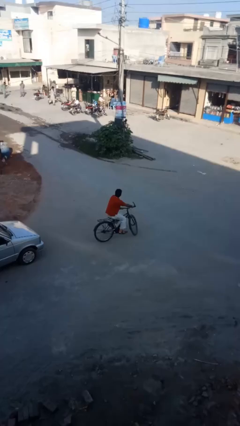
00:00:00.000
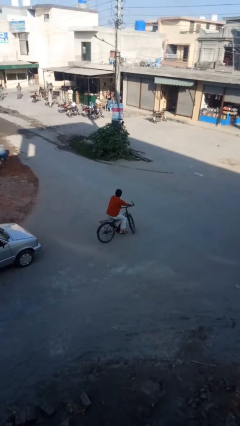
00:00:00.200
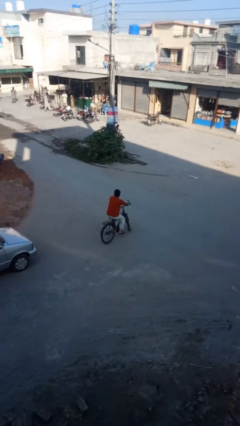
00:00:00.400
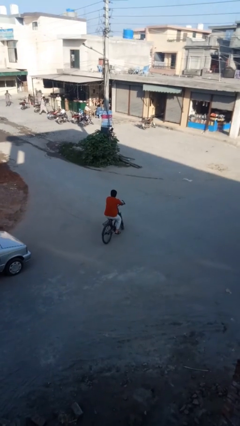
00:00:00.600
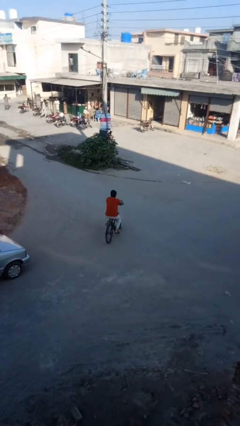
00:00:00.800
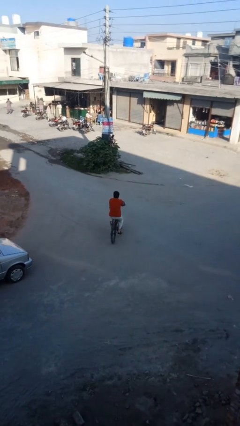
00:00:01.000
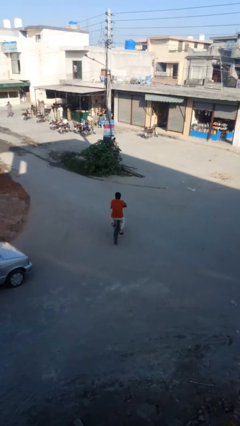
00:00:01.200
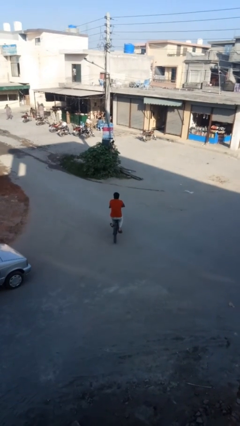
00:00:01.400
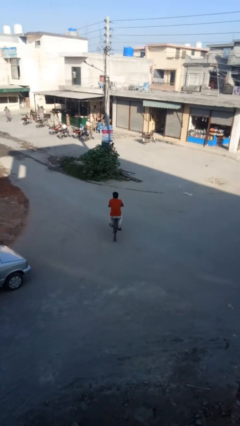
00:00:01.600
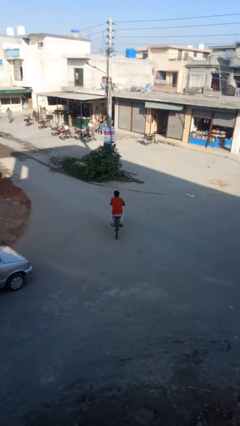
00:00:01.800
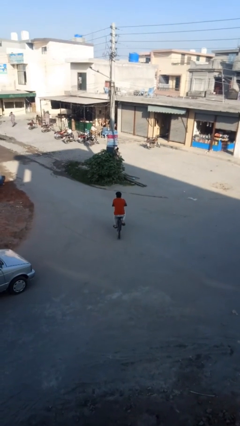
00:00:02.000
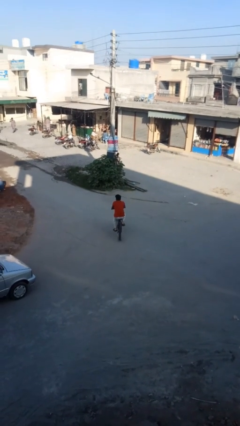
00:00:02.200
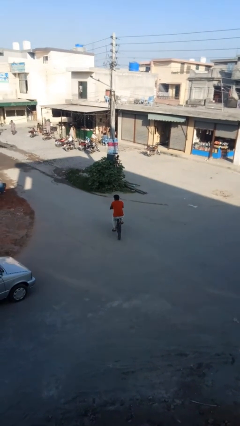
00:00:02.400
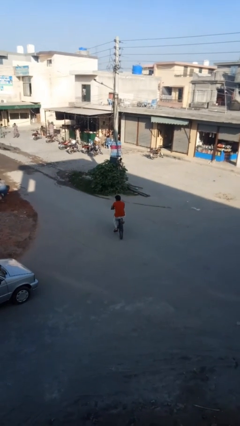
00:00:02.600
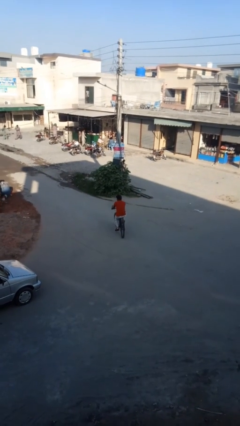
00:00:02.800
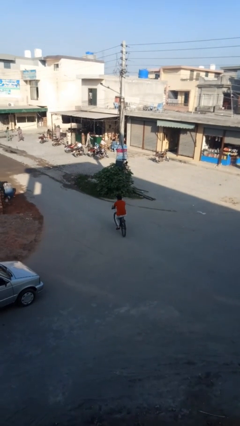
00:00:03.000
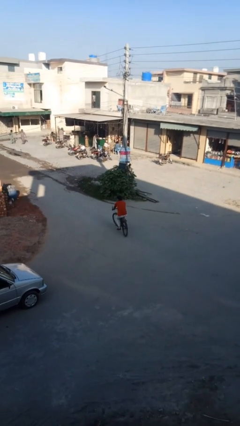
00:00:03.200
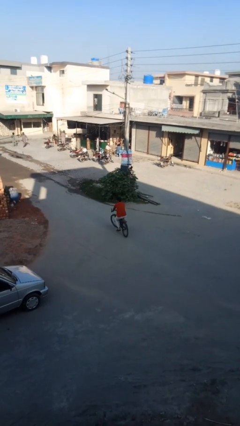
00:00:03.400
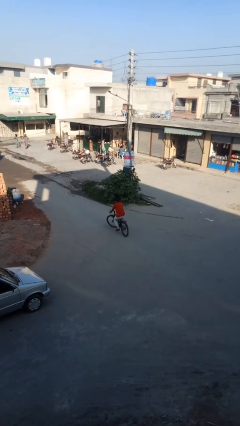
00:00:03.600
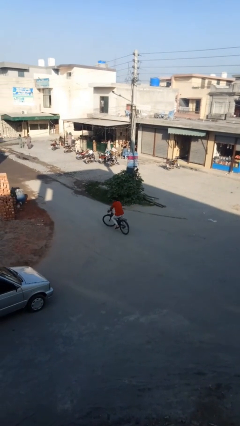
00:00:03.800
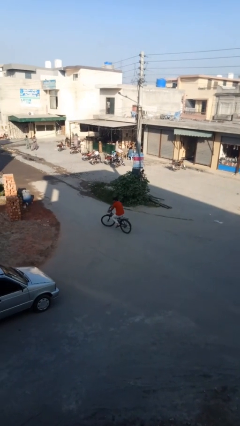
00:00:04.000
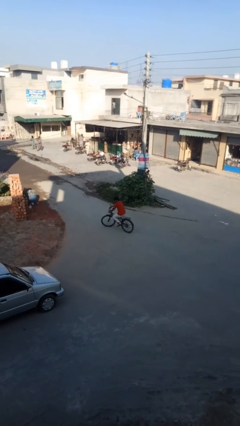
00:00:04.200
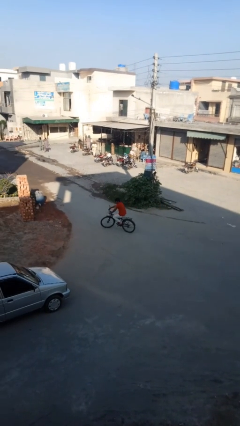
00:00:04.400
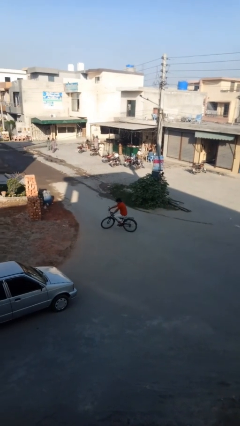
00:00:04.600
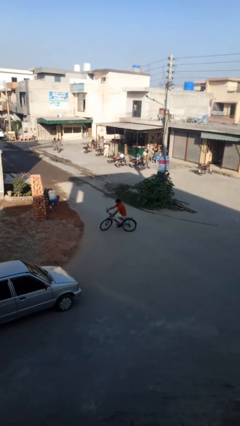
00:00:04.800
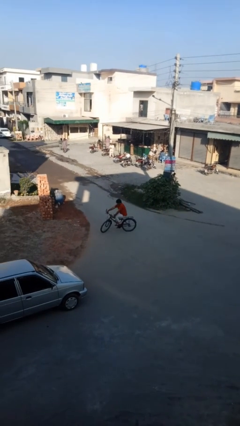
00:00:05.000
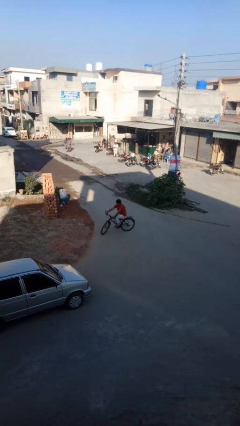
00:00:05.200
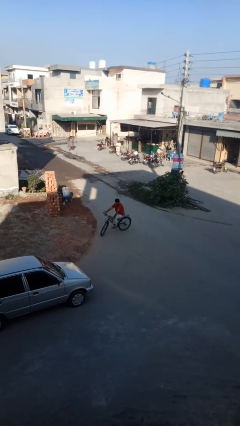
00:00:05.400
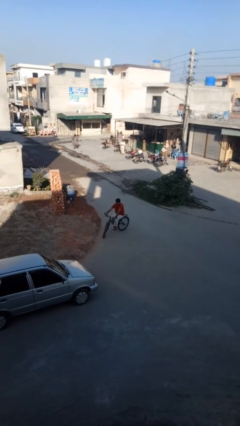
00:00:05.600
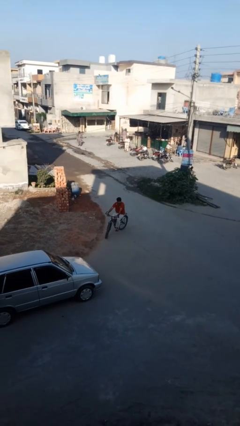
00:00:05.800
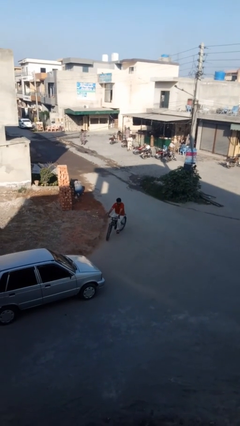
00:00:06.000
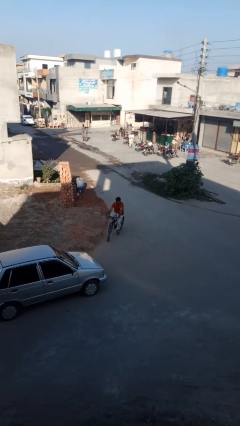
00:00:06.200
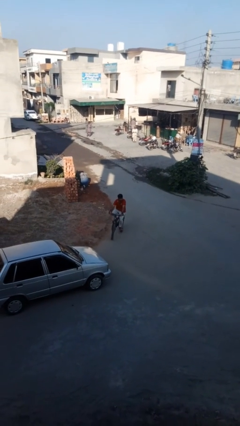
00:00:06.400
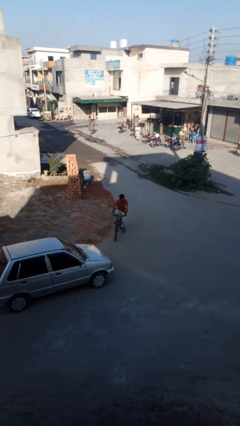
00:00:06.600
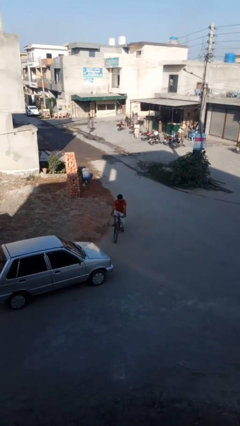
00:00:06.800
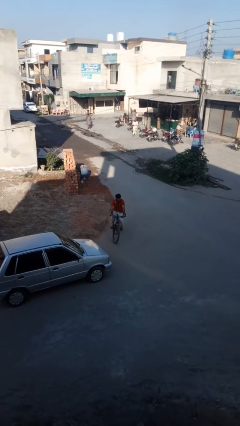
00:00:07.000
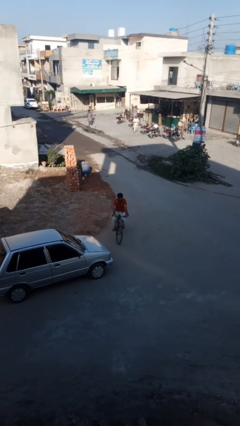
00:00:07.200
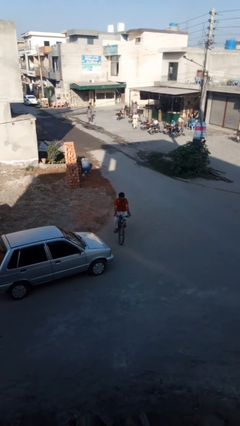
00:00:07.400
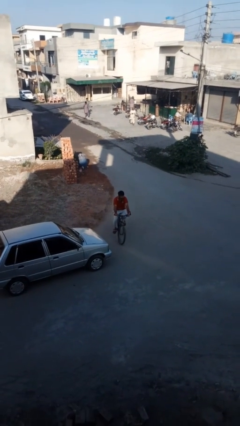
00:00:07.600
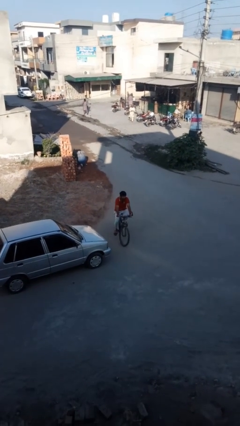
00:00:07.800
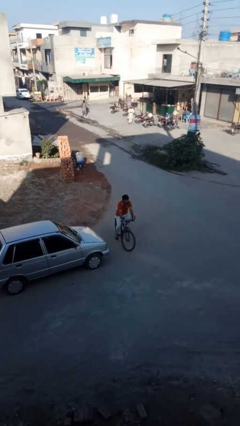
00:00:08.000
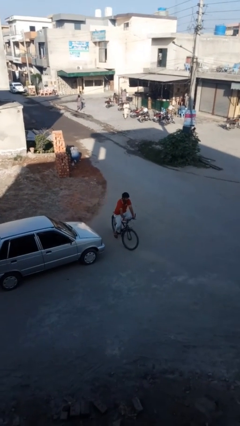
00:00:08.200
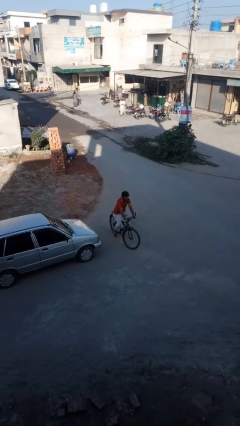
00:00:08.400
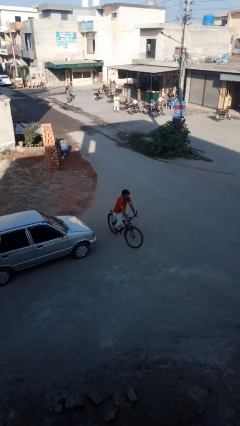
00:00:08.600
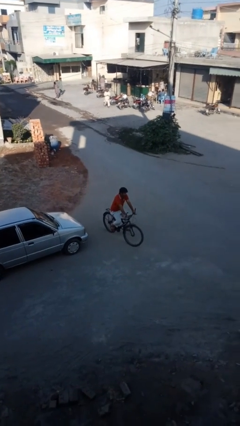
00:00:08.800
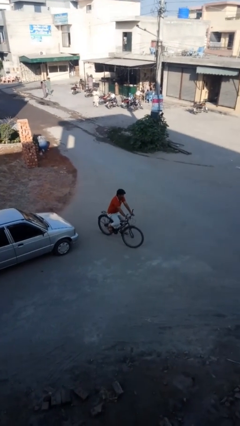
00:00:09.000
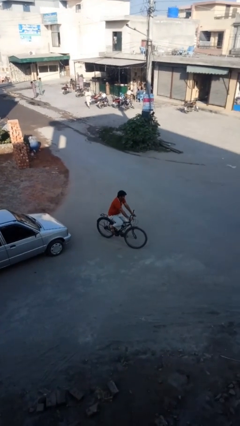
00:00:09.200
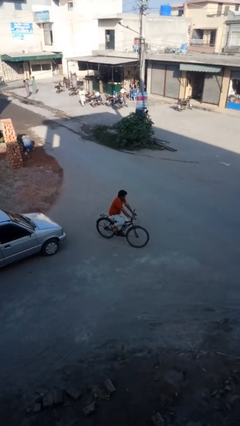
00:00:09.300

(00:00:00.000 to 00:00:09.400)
person rides bicycle

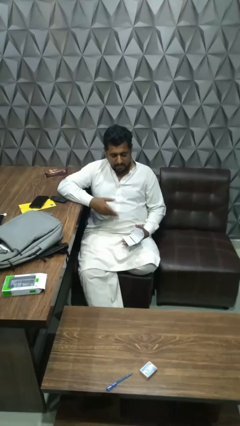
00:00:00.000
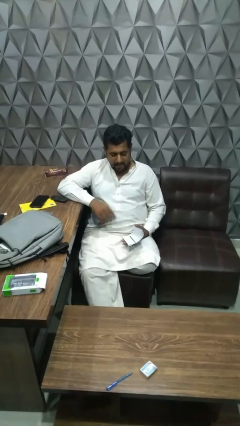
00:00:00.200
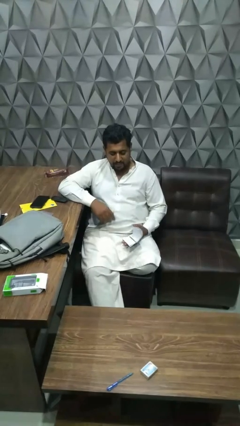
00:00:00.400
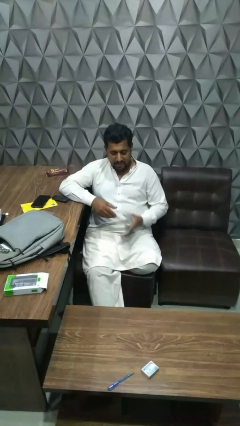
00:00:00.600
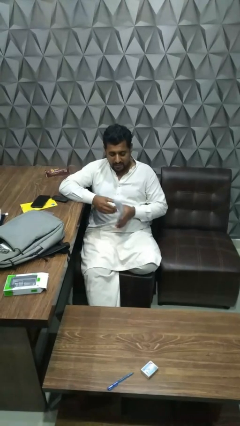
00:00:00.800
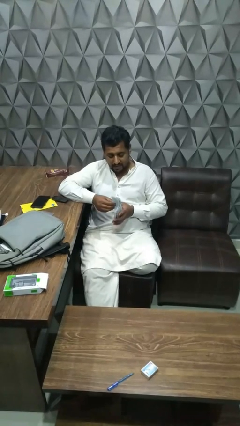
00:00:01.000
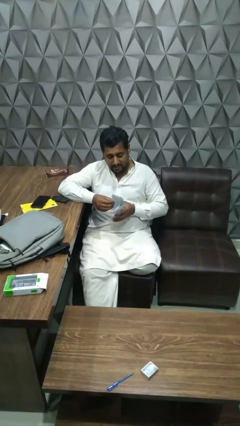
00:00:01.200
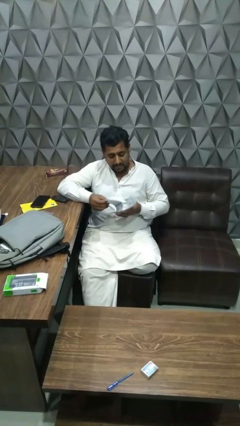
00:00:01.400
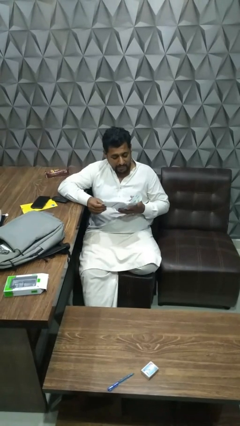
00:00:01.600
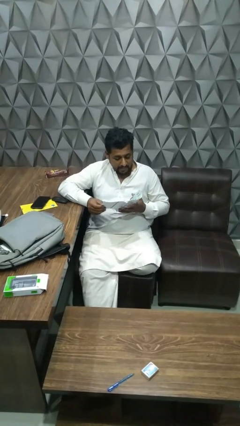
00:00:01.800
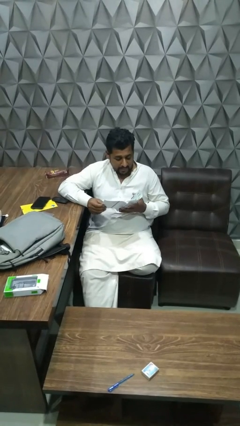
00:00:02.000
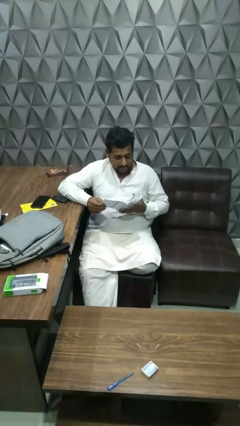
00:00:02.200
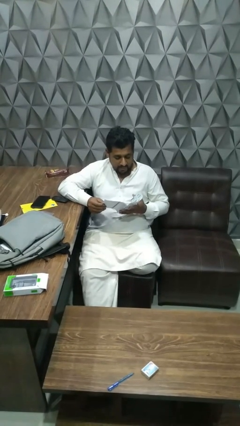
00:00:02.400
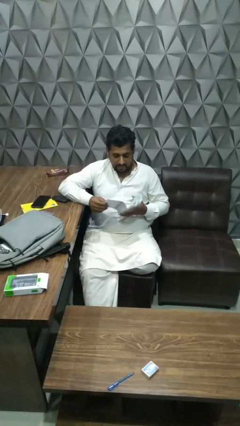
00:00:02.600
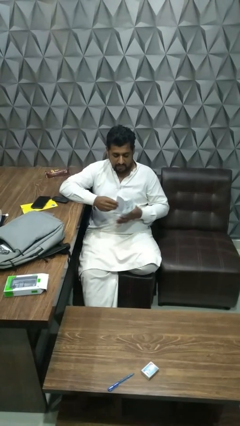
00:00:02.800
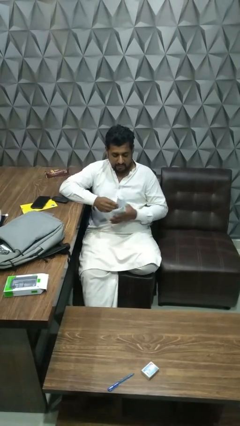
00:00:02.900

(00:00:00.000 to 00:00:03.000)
person reads magazine

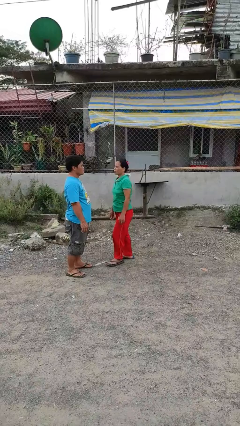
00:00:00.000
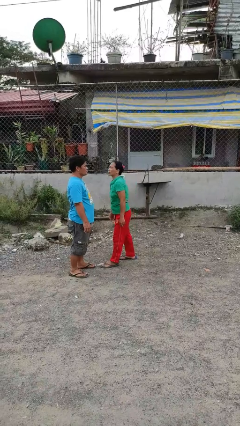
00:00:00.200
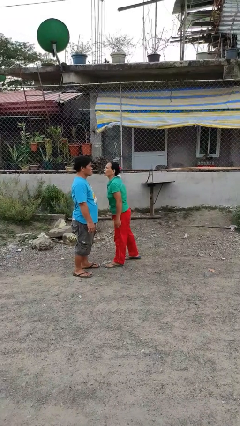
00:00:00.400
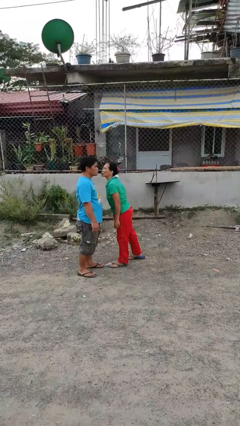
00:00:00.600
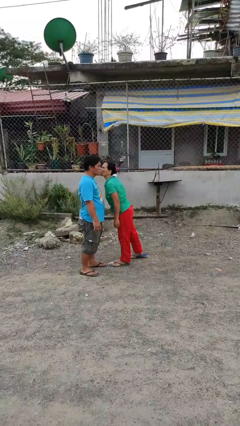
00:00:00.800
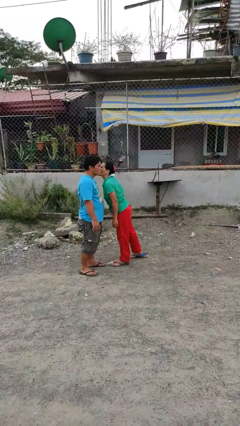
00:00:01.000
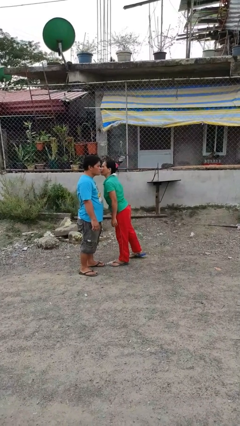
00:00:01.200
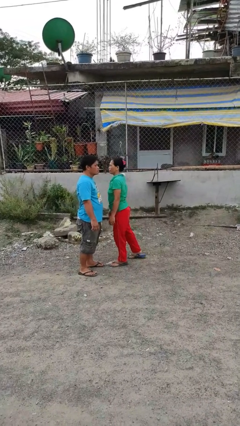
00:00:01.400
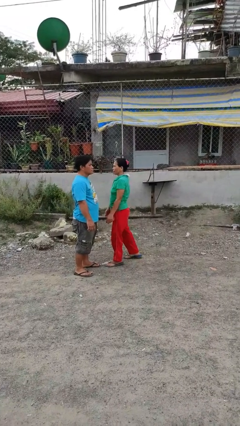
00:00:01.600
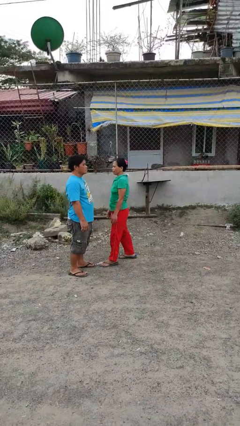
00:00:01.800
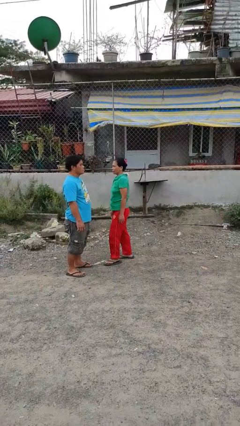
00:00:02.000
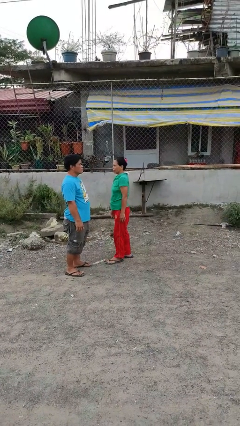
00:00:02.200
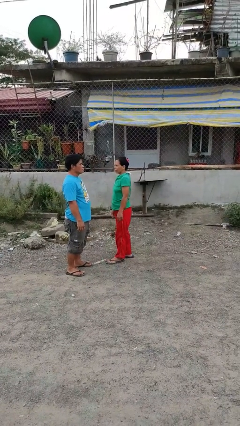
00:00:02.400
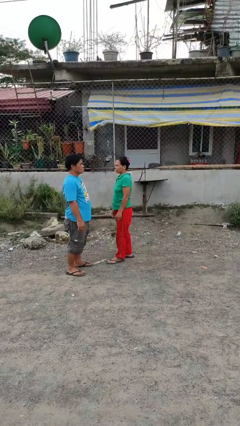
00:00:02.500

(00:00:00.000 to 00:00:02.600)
person kisses cheek of person

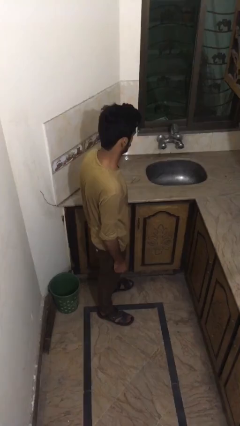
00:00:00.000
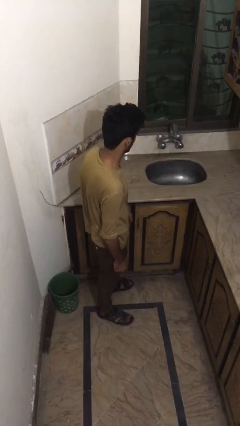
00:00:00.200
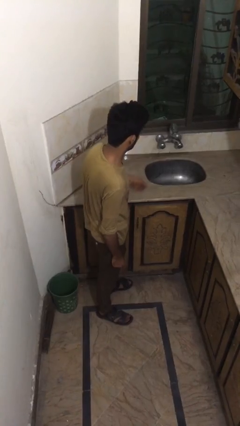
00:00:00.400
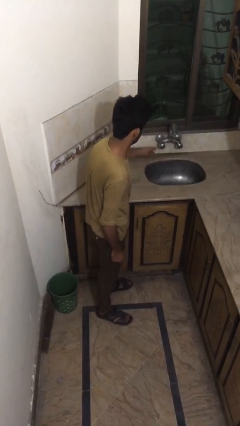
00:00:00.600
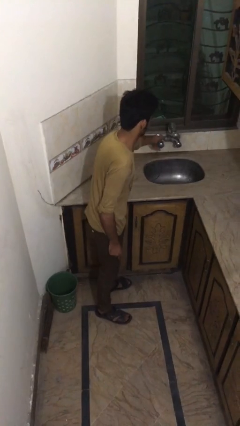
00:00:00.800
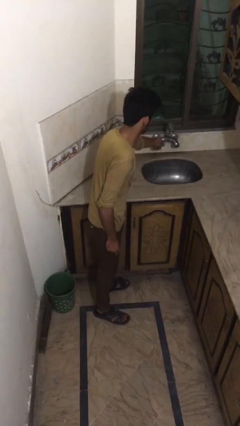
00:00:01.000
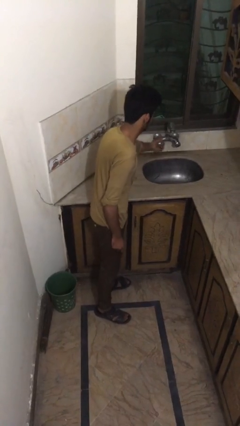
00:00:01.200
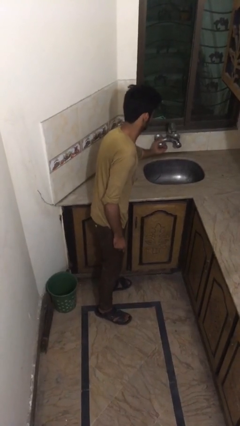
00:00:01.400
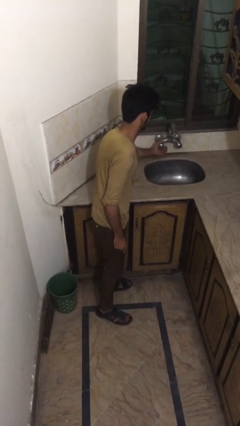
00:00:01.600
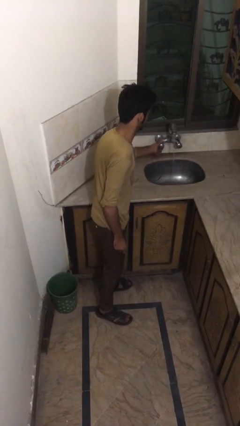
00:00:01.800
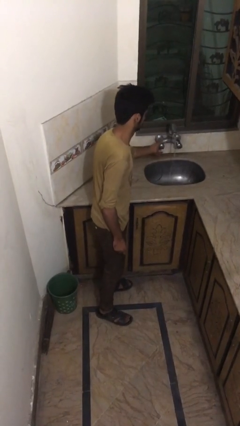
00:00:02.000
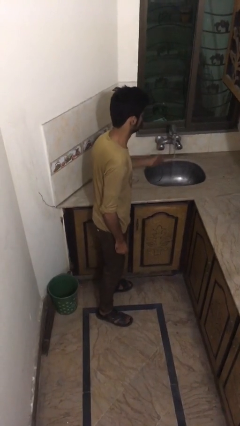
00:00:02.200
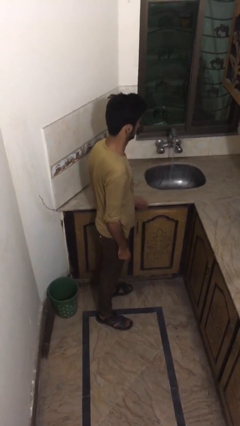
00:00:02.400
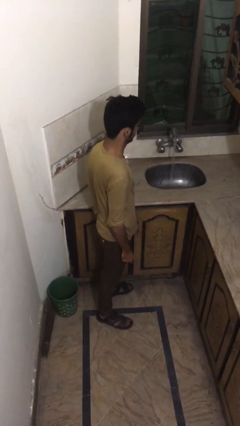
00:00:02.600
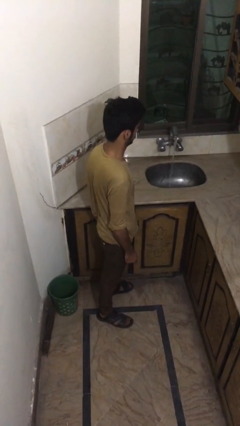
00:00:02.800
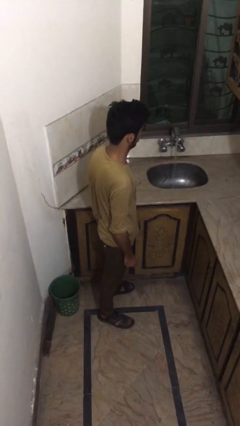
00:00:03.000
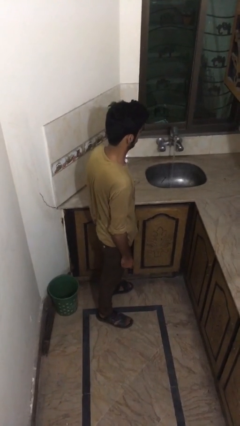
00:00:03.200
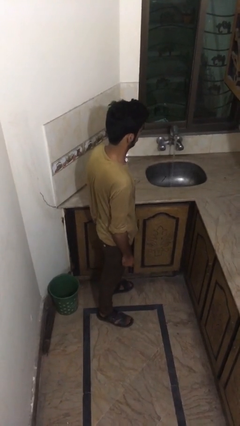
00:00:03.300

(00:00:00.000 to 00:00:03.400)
person turns on faucet
